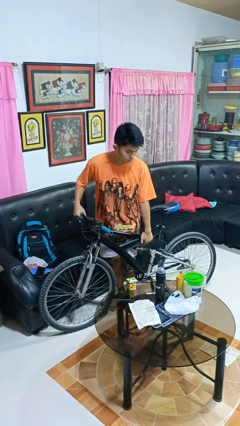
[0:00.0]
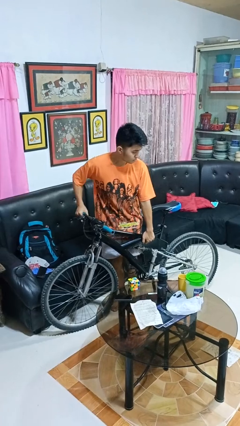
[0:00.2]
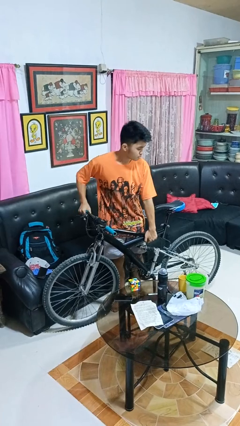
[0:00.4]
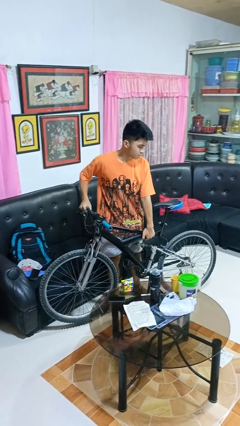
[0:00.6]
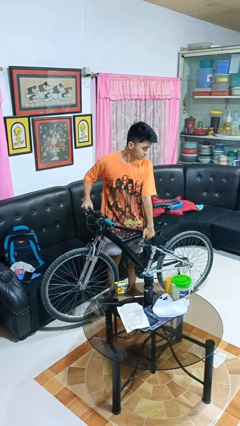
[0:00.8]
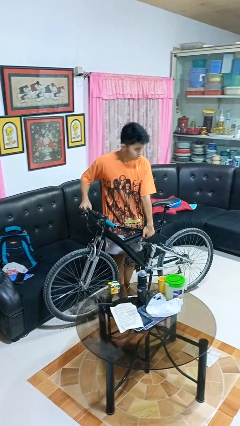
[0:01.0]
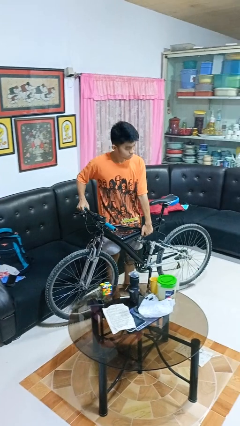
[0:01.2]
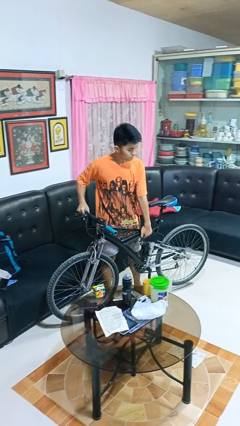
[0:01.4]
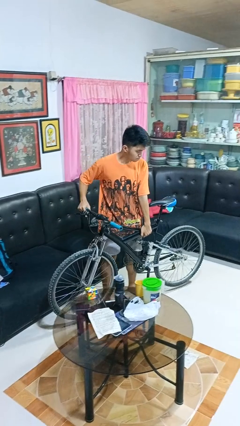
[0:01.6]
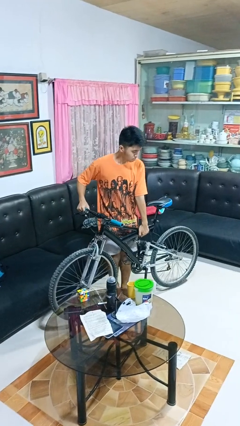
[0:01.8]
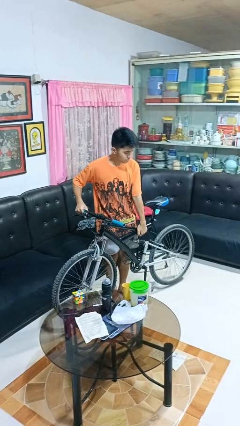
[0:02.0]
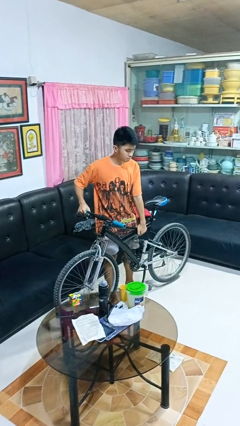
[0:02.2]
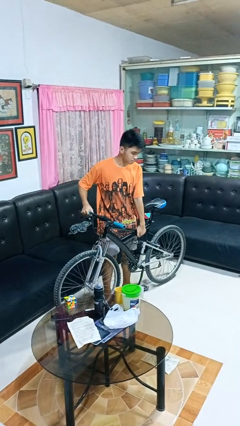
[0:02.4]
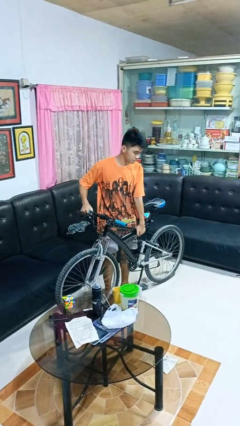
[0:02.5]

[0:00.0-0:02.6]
person carries bicycle

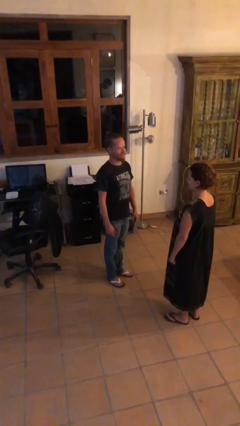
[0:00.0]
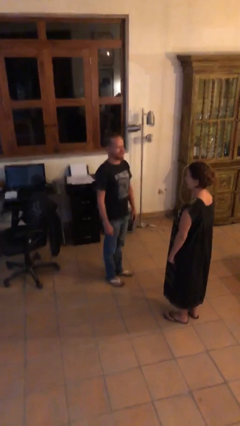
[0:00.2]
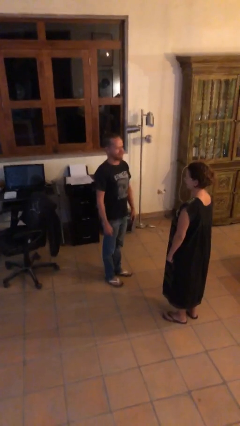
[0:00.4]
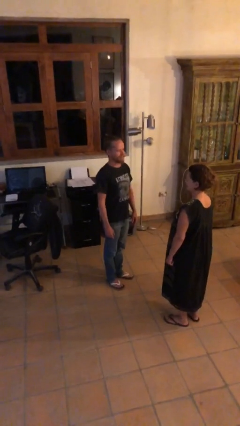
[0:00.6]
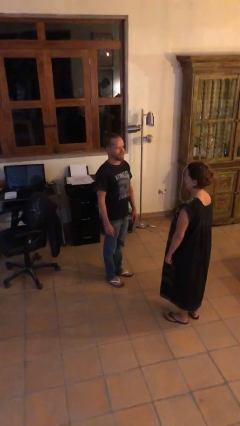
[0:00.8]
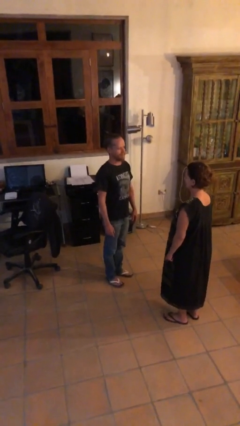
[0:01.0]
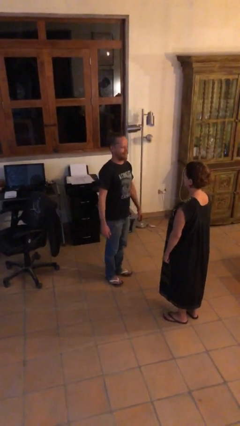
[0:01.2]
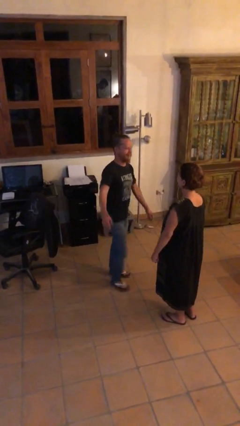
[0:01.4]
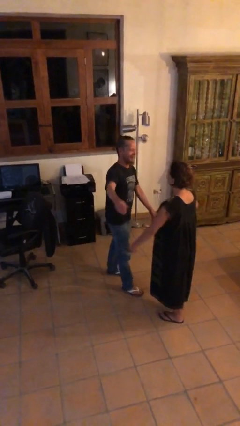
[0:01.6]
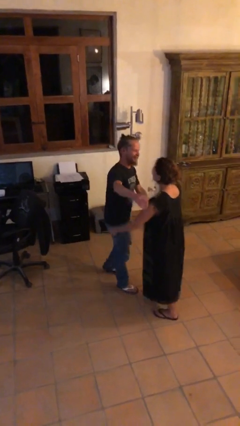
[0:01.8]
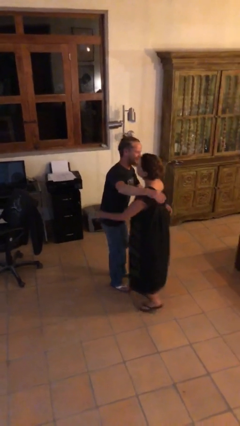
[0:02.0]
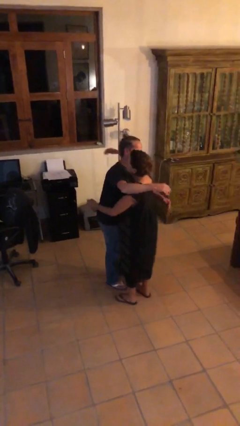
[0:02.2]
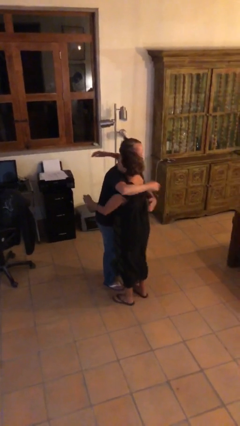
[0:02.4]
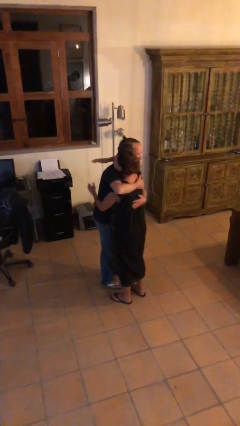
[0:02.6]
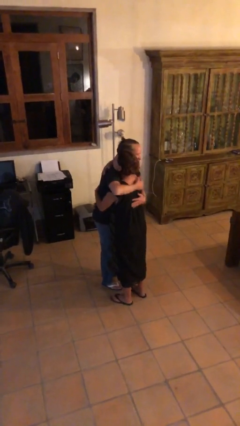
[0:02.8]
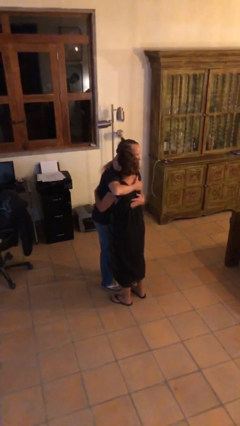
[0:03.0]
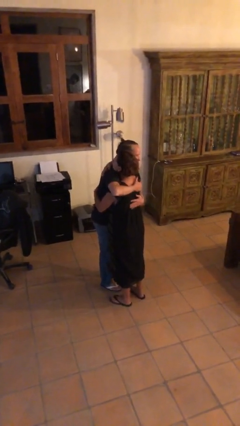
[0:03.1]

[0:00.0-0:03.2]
person embraces person

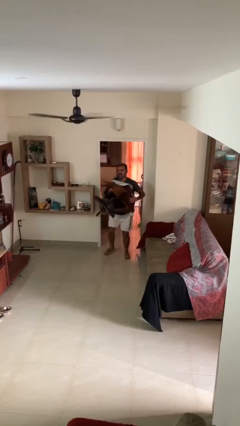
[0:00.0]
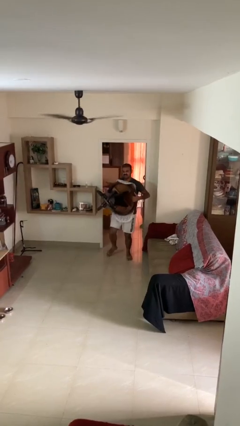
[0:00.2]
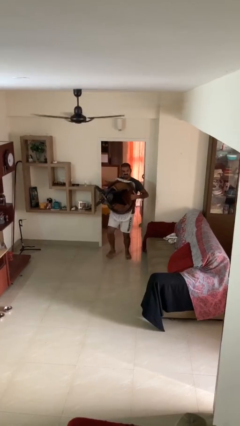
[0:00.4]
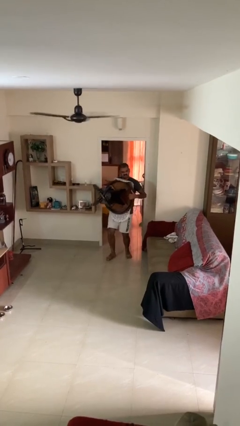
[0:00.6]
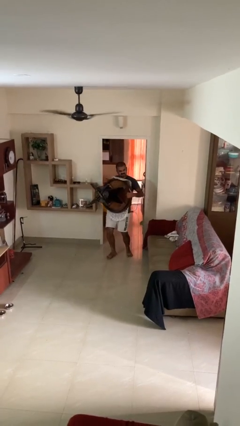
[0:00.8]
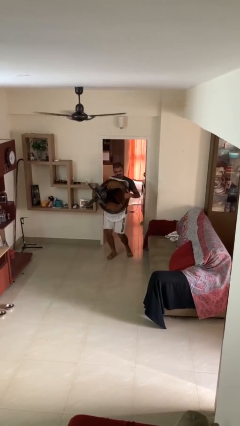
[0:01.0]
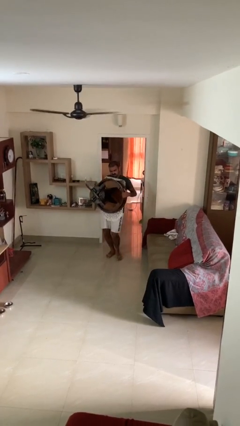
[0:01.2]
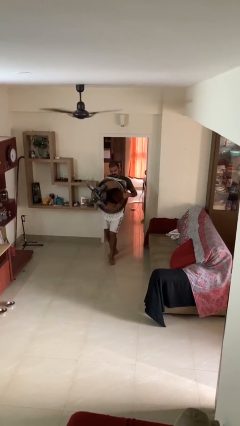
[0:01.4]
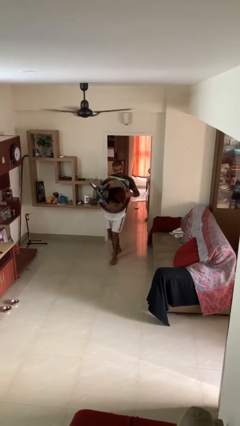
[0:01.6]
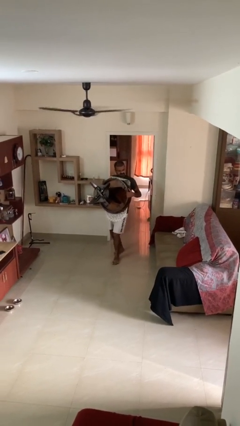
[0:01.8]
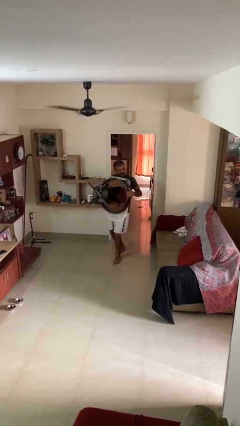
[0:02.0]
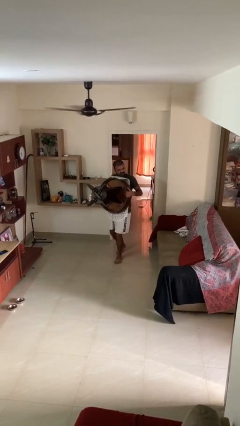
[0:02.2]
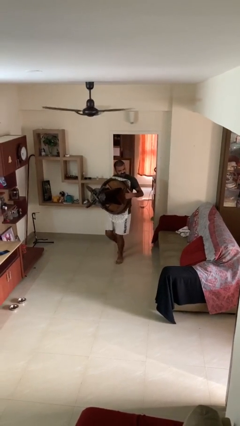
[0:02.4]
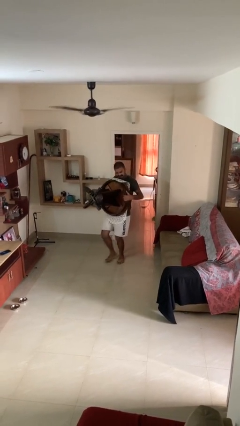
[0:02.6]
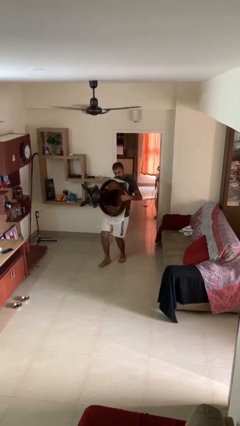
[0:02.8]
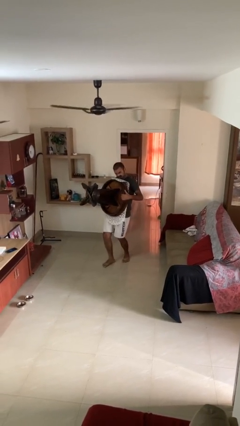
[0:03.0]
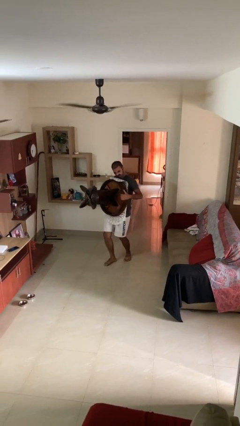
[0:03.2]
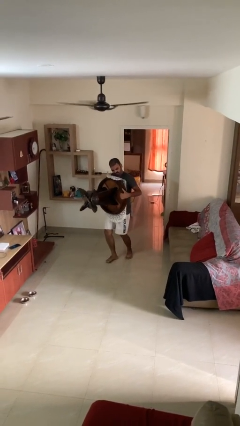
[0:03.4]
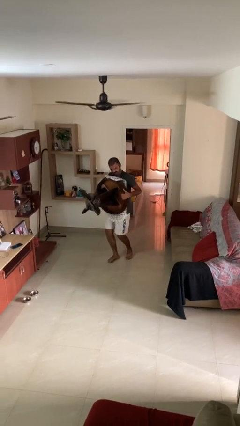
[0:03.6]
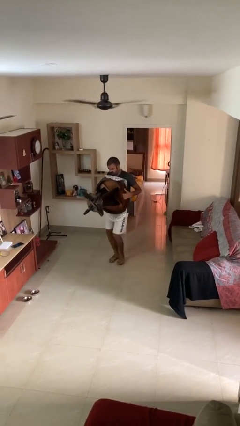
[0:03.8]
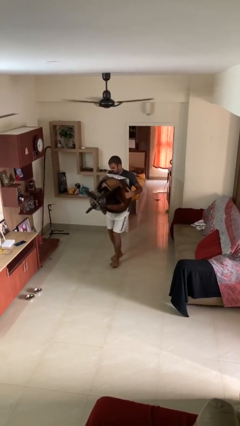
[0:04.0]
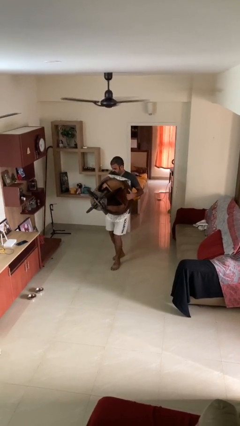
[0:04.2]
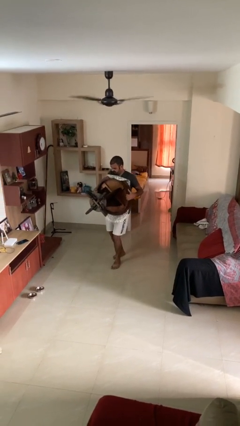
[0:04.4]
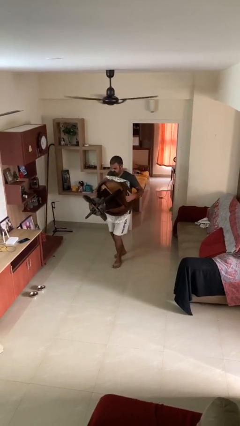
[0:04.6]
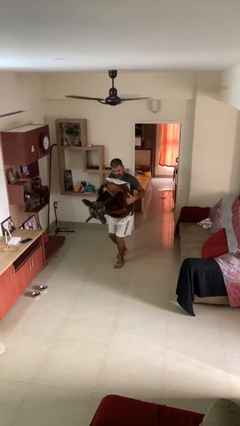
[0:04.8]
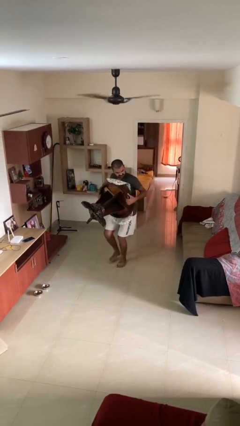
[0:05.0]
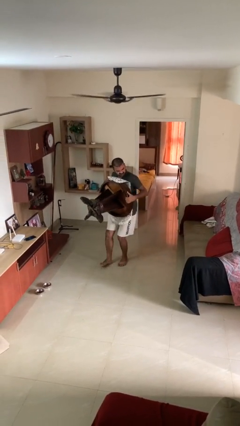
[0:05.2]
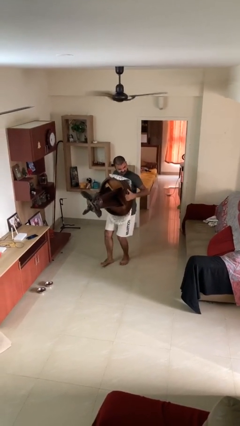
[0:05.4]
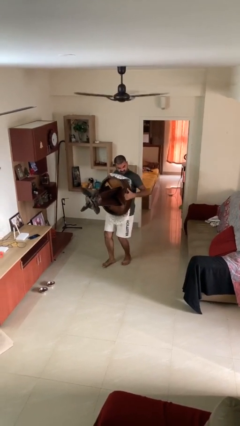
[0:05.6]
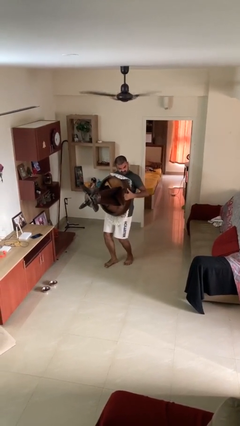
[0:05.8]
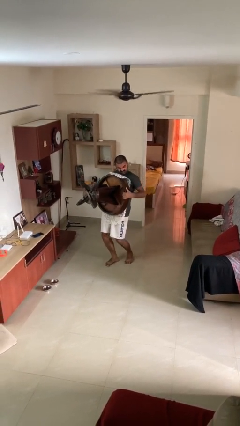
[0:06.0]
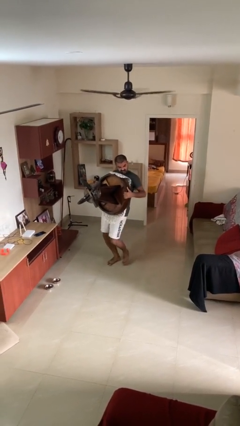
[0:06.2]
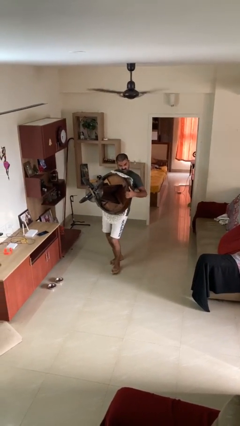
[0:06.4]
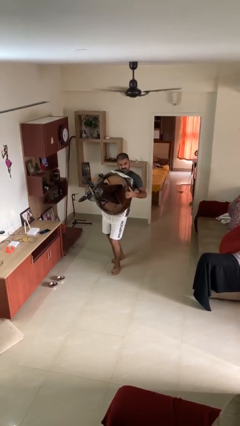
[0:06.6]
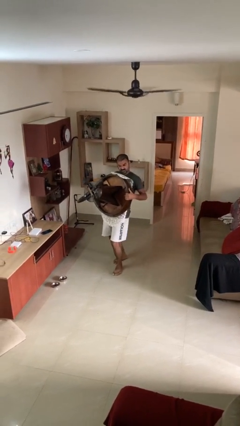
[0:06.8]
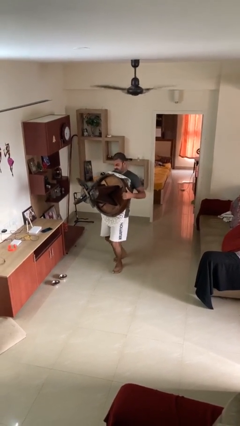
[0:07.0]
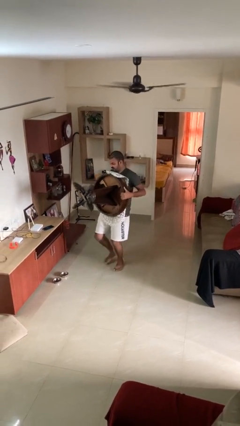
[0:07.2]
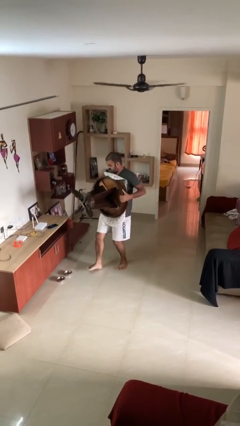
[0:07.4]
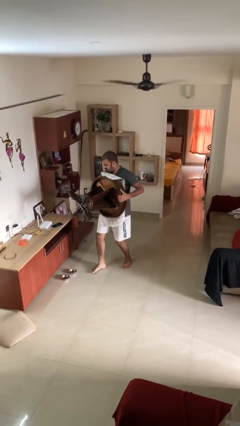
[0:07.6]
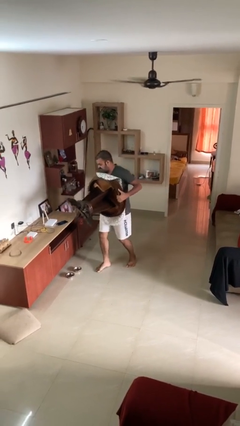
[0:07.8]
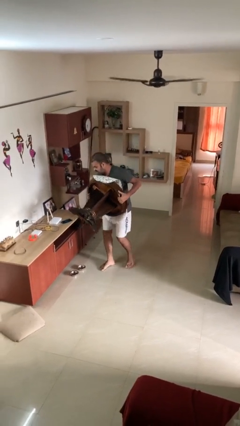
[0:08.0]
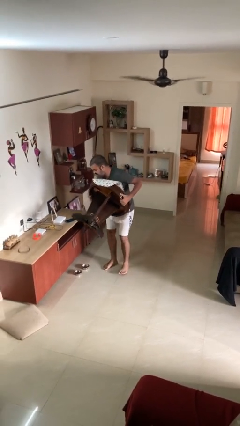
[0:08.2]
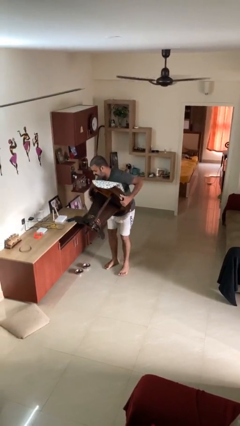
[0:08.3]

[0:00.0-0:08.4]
person carries heavy object

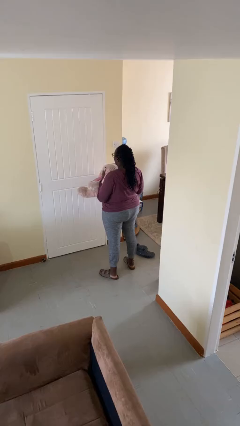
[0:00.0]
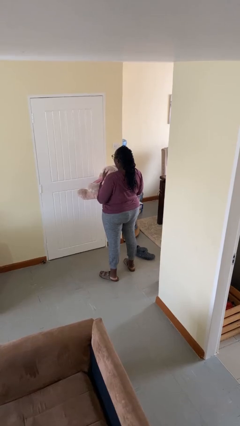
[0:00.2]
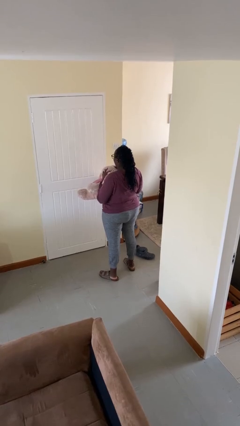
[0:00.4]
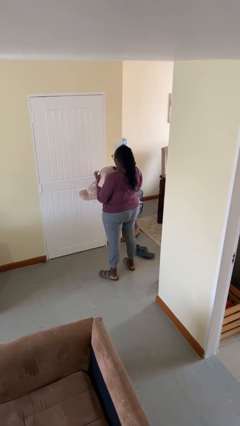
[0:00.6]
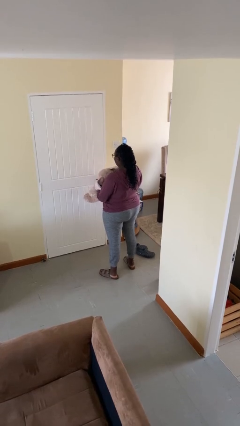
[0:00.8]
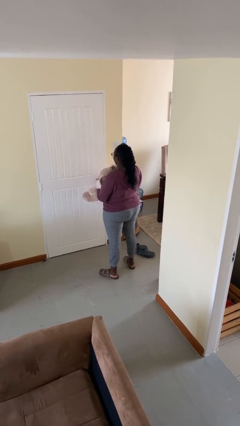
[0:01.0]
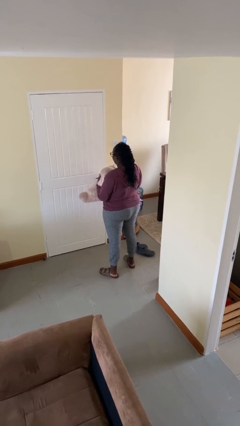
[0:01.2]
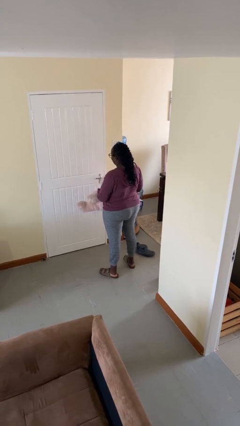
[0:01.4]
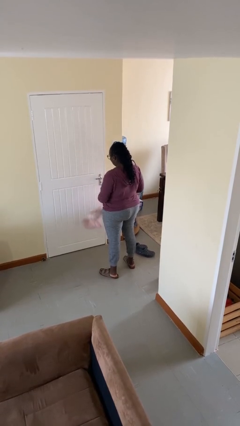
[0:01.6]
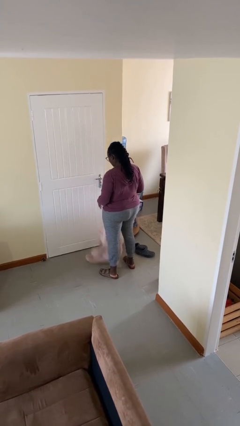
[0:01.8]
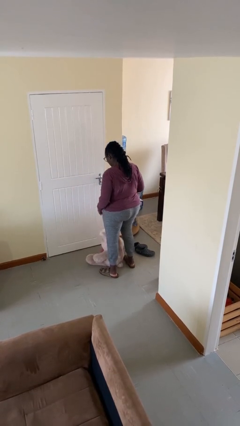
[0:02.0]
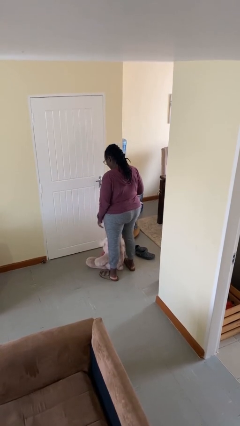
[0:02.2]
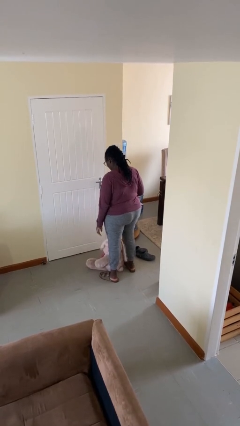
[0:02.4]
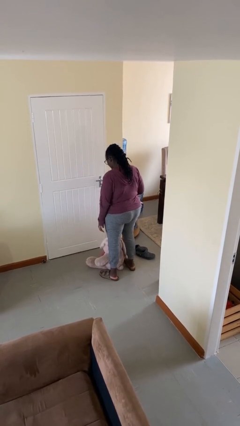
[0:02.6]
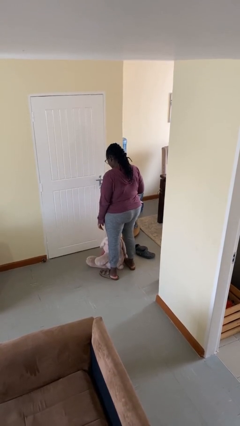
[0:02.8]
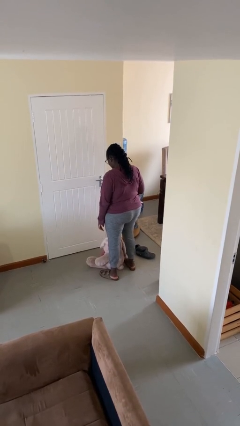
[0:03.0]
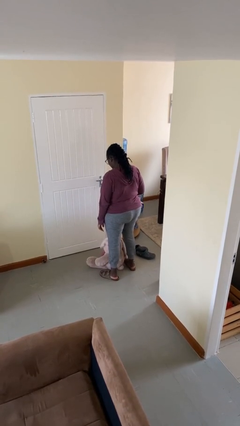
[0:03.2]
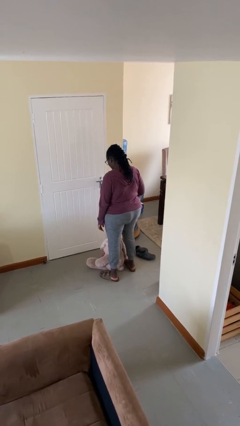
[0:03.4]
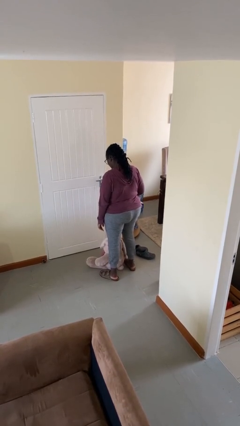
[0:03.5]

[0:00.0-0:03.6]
person drops object
